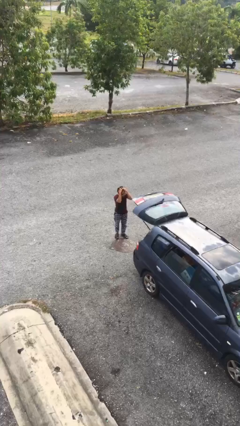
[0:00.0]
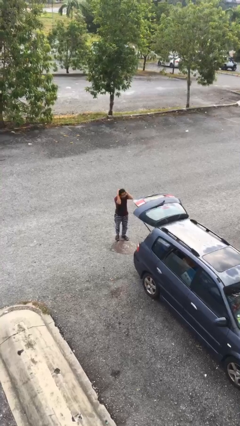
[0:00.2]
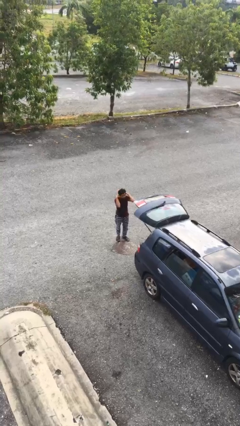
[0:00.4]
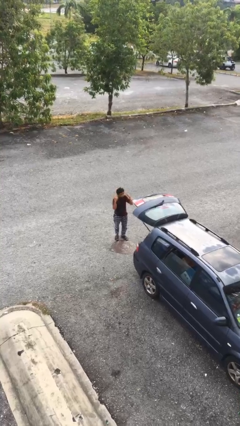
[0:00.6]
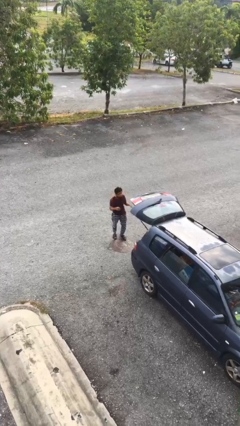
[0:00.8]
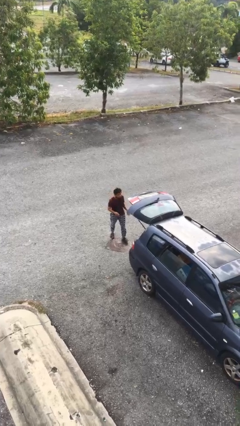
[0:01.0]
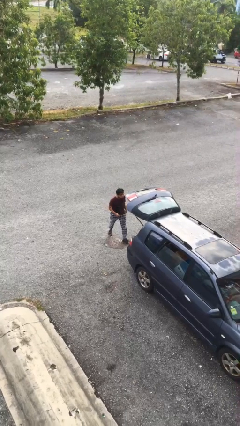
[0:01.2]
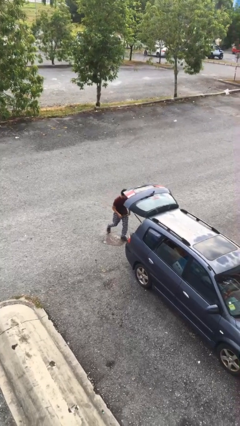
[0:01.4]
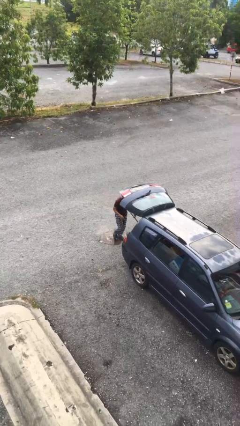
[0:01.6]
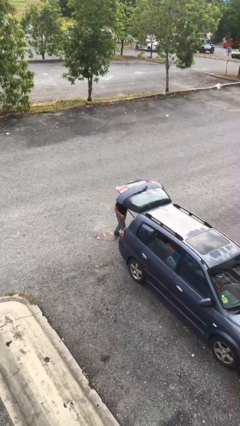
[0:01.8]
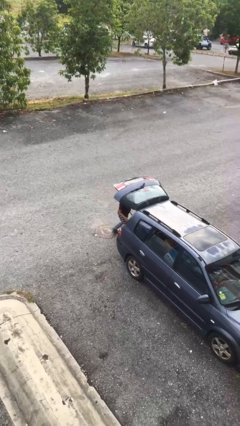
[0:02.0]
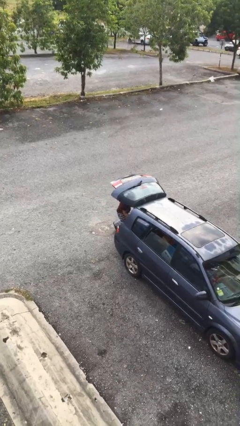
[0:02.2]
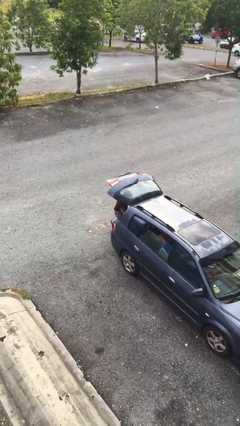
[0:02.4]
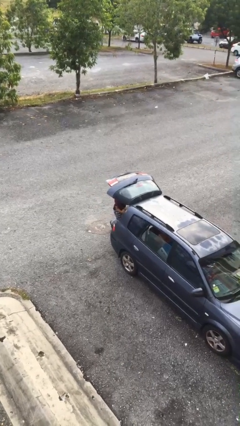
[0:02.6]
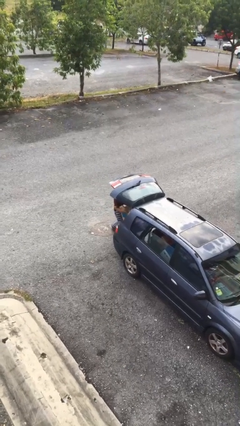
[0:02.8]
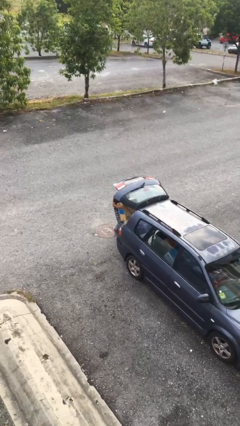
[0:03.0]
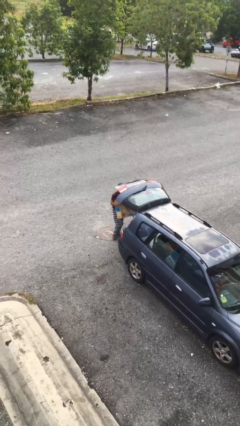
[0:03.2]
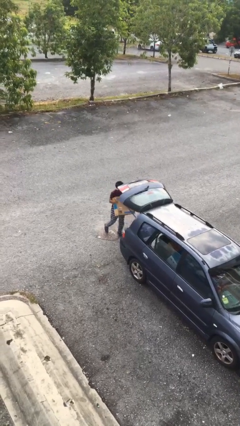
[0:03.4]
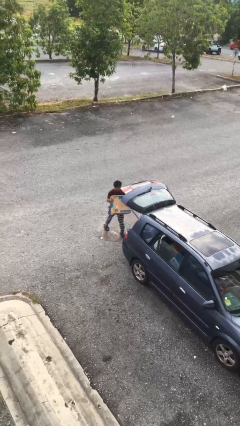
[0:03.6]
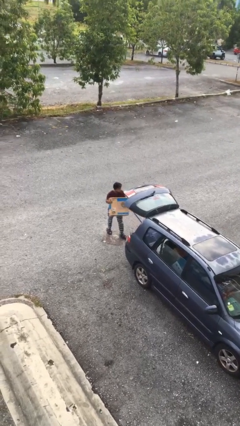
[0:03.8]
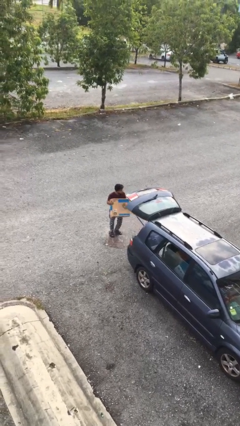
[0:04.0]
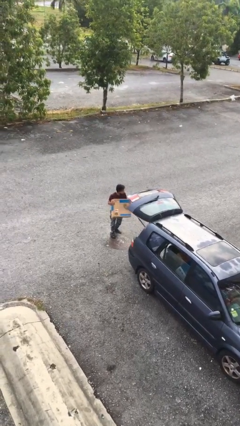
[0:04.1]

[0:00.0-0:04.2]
person unloads car

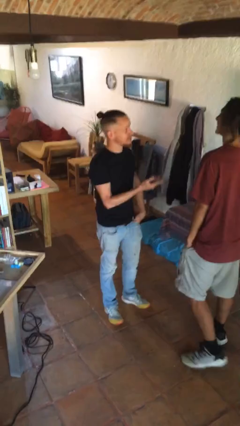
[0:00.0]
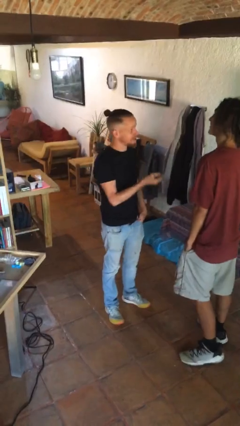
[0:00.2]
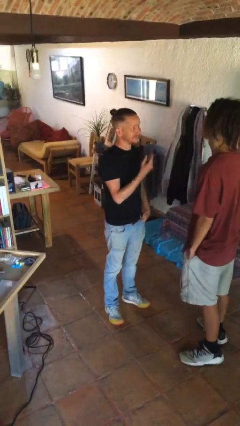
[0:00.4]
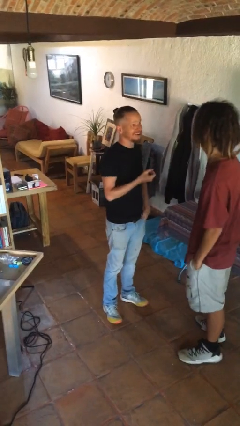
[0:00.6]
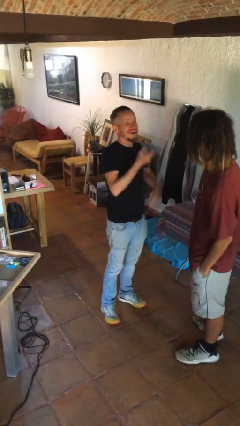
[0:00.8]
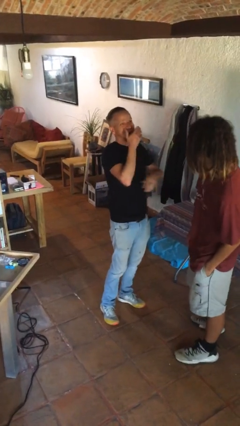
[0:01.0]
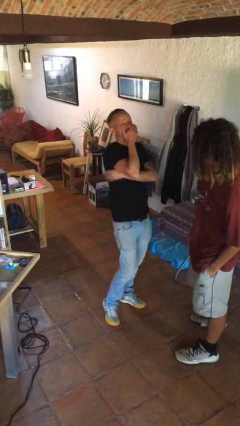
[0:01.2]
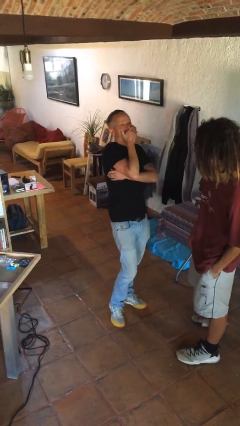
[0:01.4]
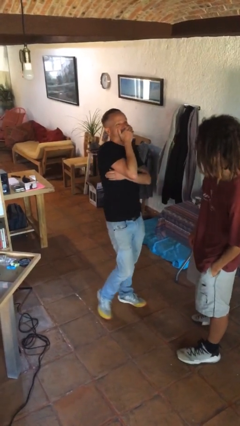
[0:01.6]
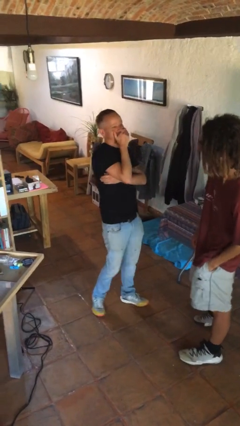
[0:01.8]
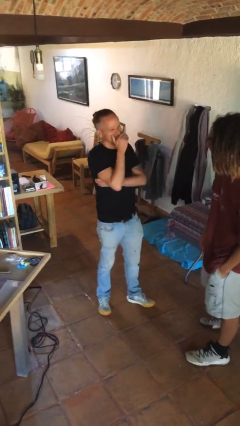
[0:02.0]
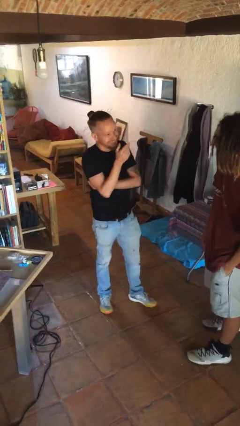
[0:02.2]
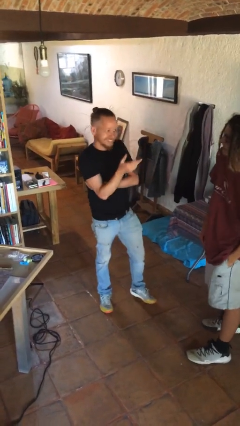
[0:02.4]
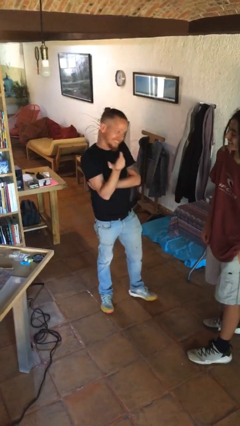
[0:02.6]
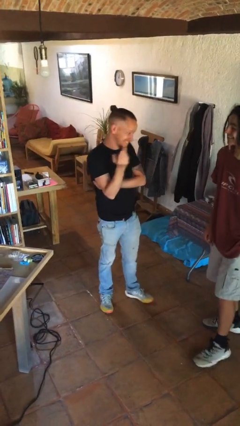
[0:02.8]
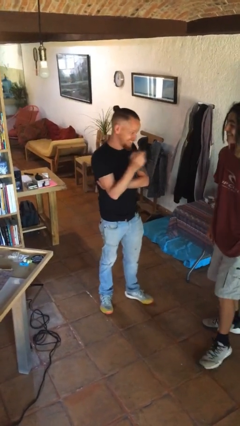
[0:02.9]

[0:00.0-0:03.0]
person laughs with person

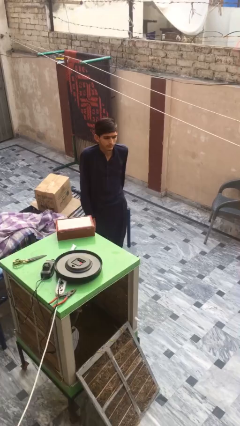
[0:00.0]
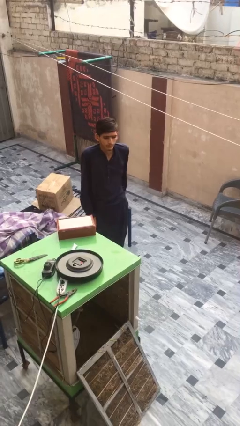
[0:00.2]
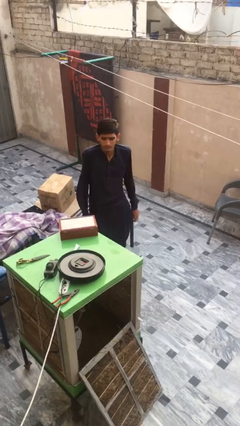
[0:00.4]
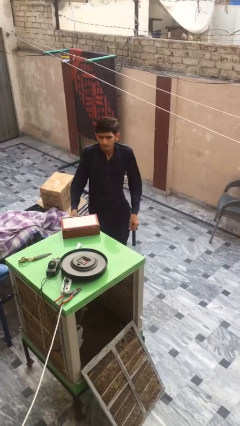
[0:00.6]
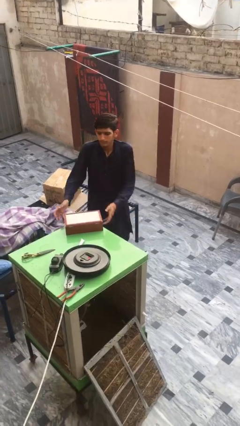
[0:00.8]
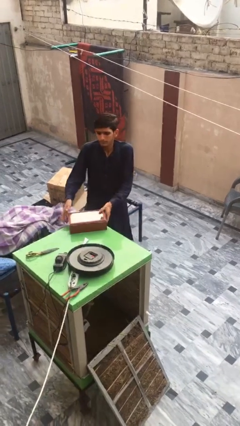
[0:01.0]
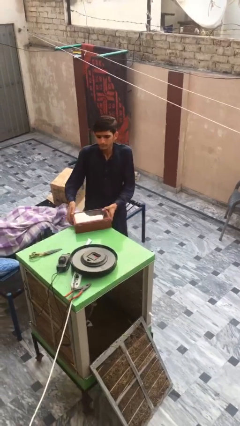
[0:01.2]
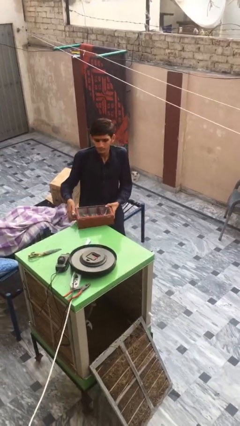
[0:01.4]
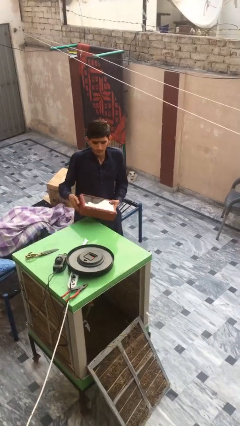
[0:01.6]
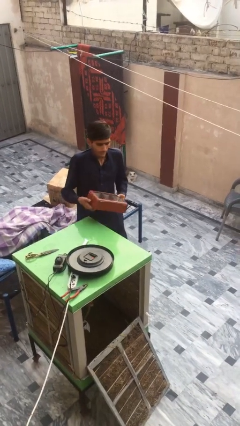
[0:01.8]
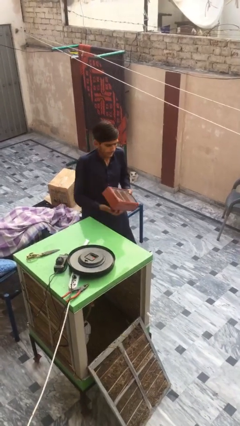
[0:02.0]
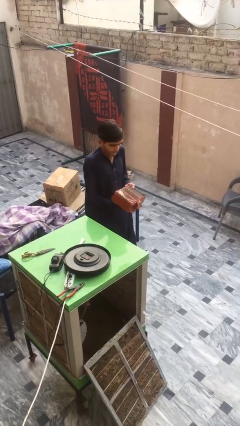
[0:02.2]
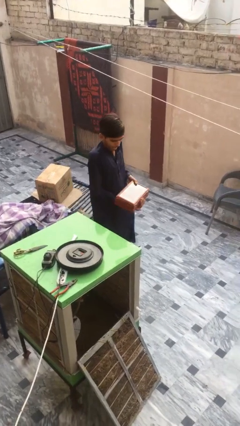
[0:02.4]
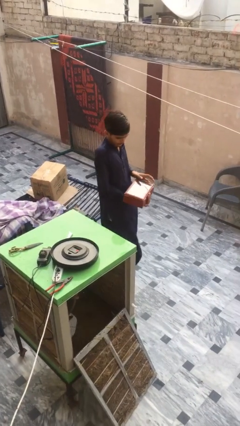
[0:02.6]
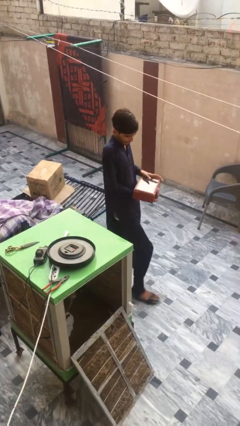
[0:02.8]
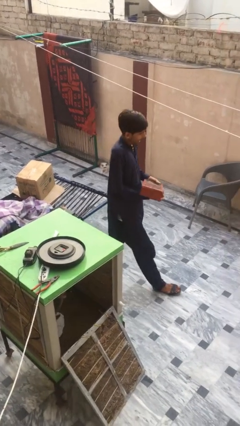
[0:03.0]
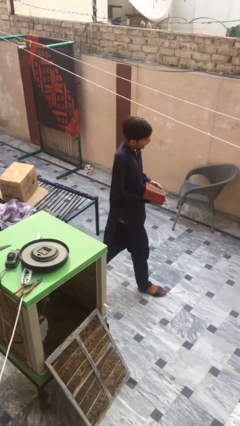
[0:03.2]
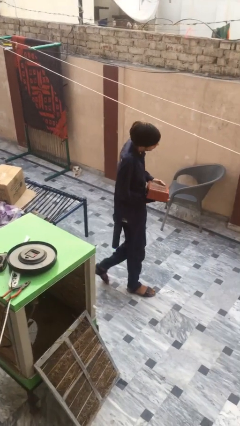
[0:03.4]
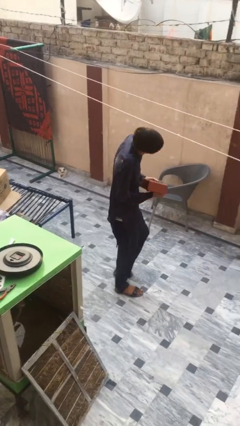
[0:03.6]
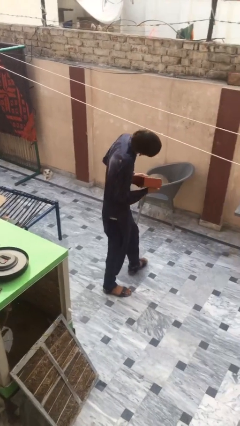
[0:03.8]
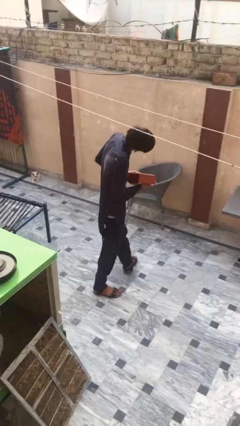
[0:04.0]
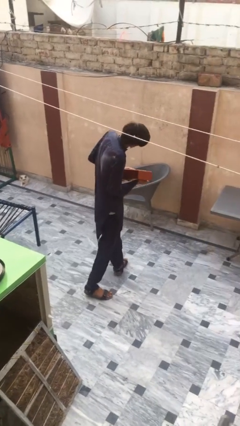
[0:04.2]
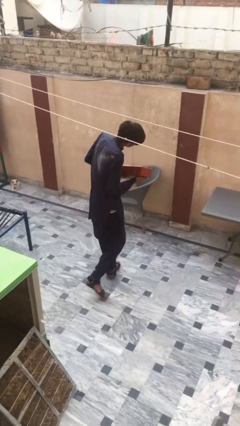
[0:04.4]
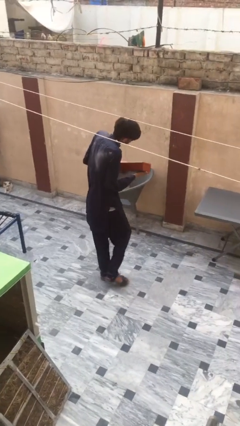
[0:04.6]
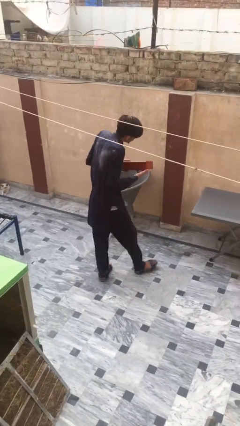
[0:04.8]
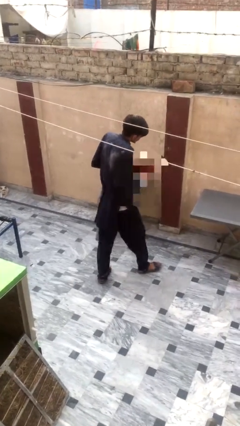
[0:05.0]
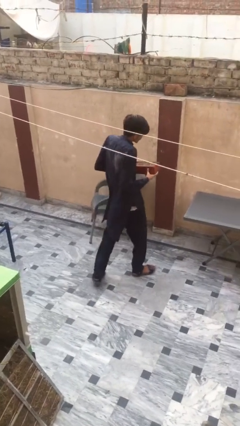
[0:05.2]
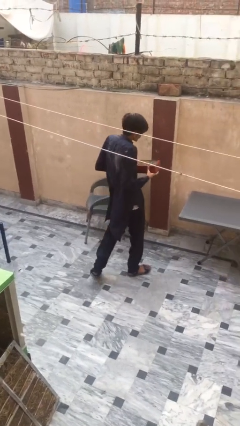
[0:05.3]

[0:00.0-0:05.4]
person picks up object from table

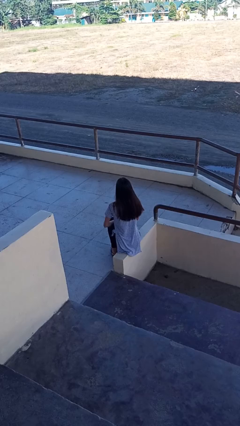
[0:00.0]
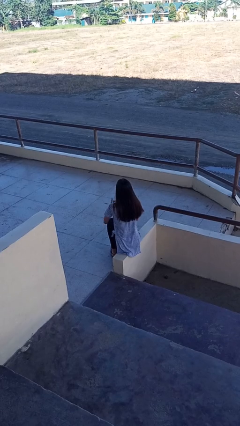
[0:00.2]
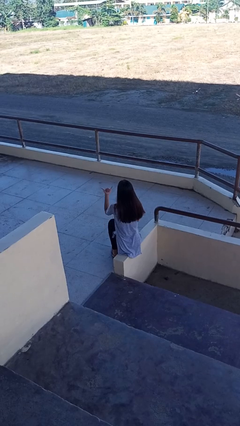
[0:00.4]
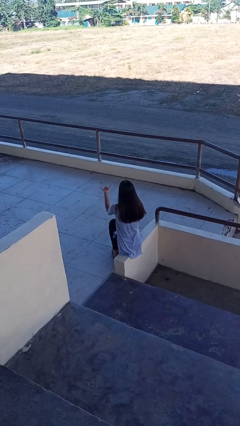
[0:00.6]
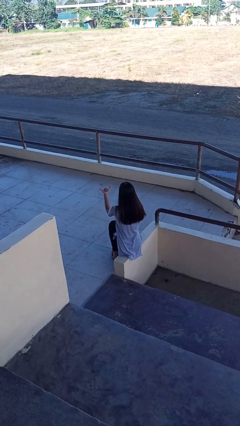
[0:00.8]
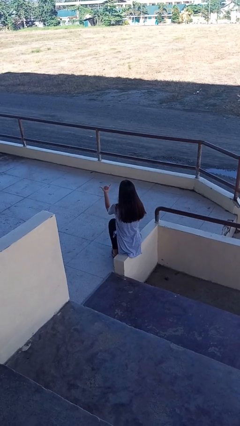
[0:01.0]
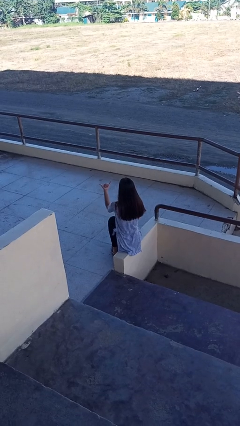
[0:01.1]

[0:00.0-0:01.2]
person gestures hang loose

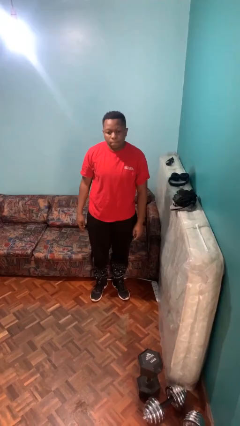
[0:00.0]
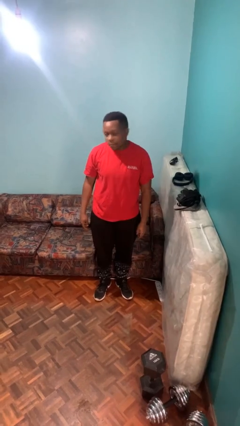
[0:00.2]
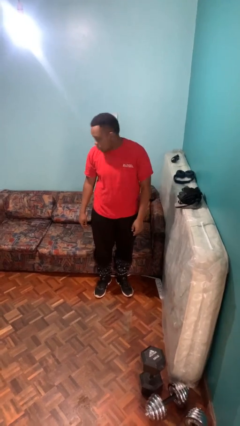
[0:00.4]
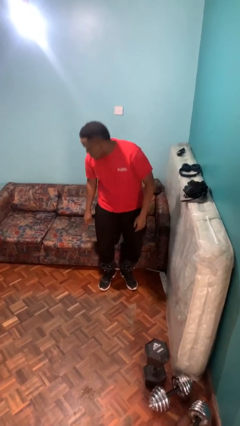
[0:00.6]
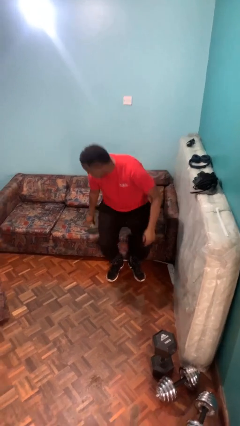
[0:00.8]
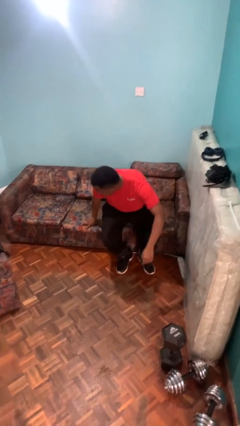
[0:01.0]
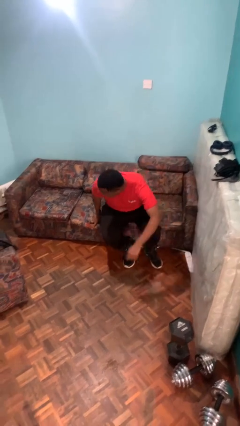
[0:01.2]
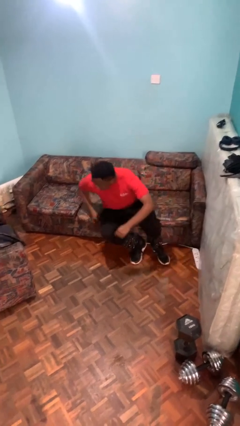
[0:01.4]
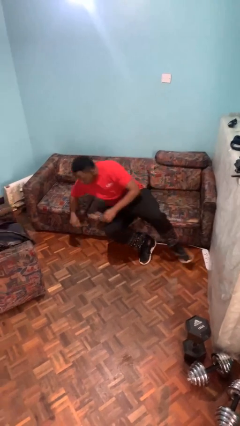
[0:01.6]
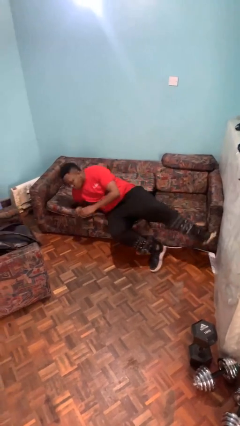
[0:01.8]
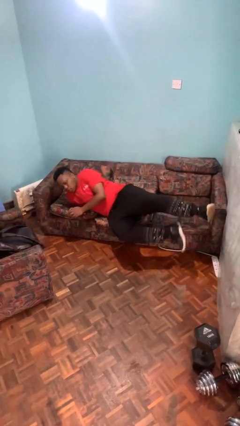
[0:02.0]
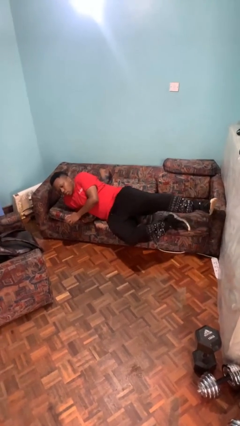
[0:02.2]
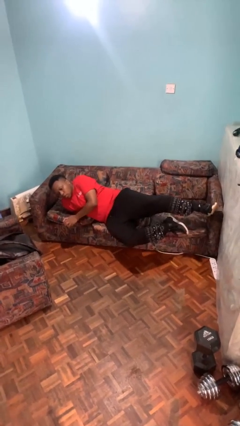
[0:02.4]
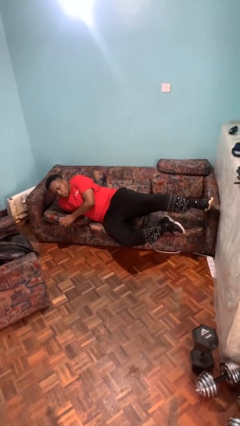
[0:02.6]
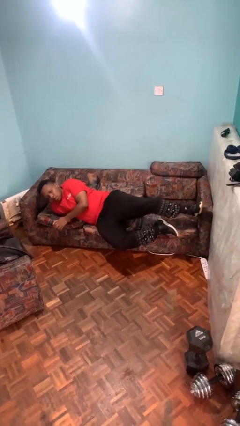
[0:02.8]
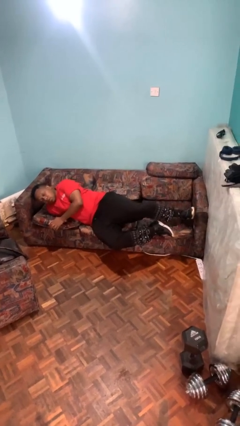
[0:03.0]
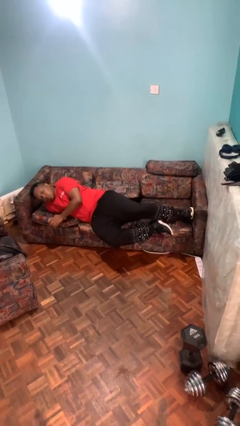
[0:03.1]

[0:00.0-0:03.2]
person lies down on couch

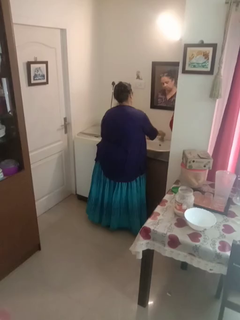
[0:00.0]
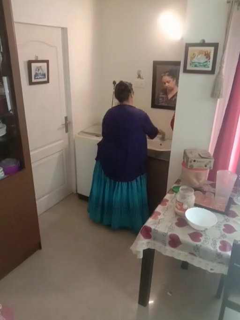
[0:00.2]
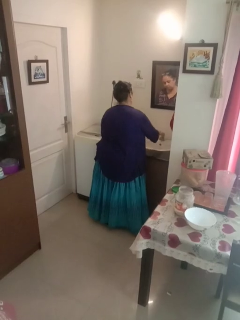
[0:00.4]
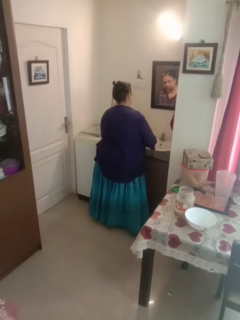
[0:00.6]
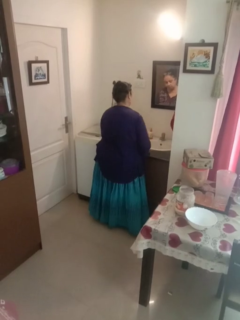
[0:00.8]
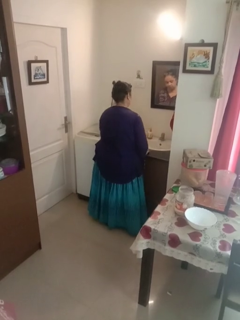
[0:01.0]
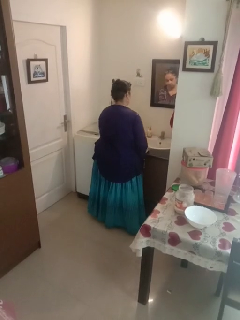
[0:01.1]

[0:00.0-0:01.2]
person turns off faucet
